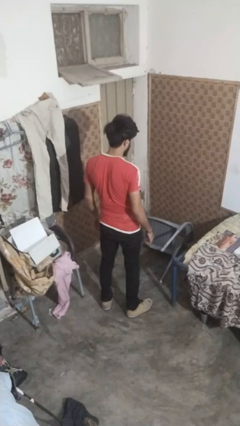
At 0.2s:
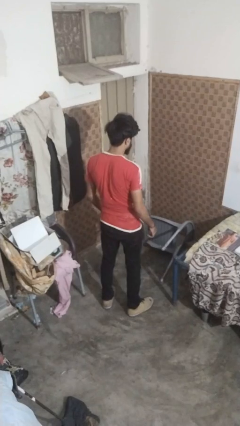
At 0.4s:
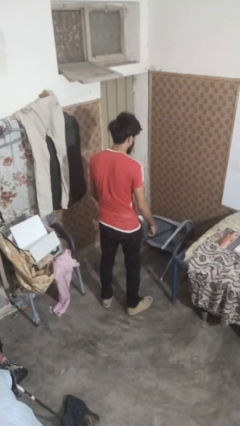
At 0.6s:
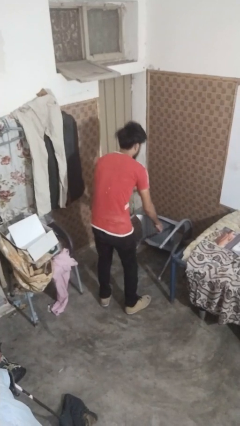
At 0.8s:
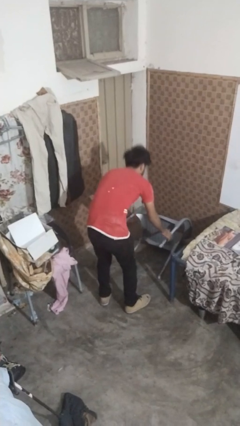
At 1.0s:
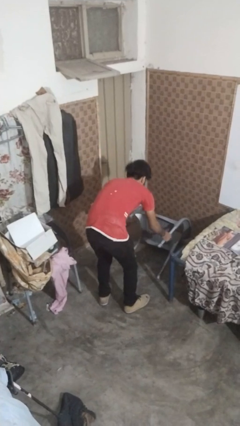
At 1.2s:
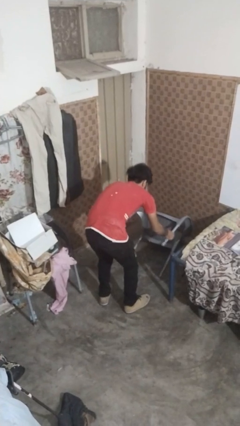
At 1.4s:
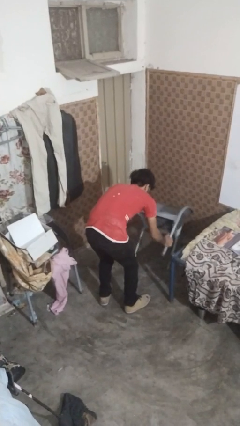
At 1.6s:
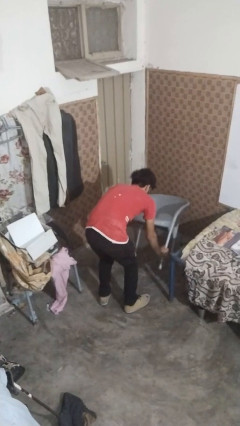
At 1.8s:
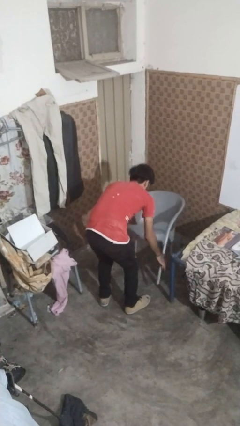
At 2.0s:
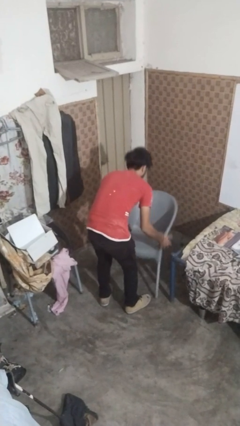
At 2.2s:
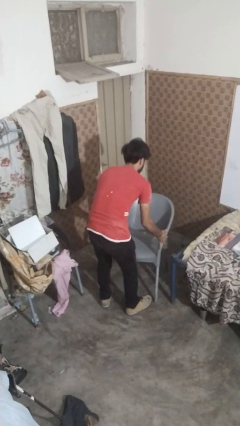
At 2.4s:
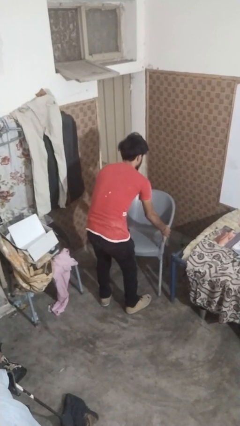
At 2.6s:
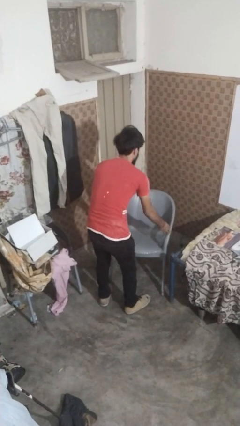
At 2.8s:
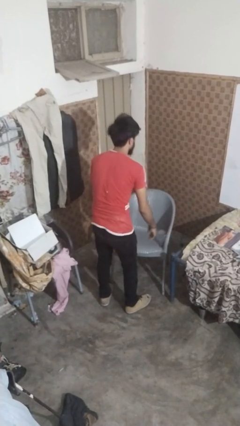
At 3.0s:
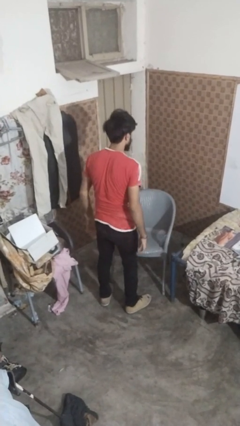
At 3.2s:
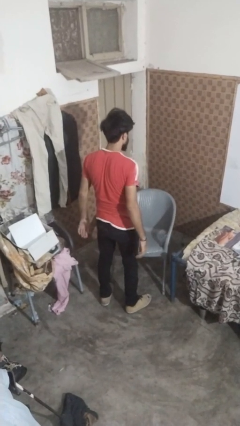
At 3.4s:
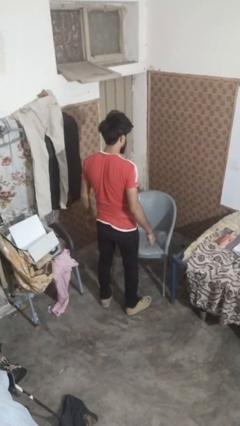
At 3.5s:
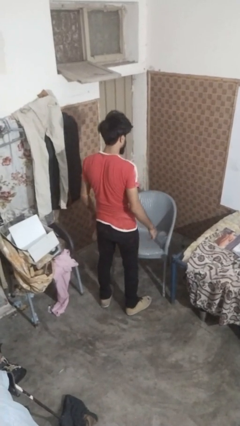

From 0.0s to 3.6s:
person sets upright furniture

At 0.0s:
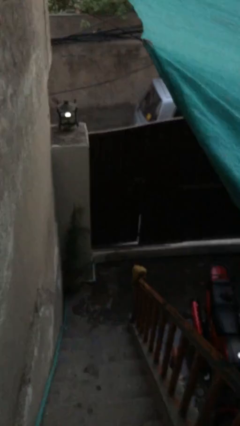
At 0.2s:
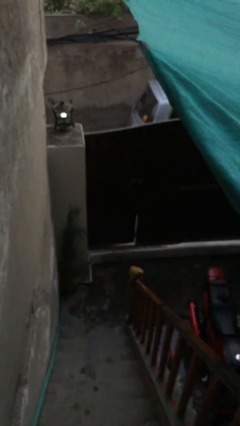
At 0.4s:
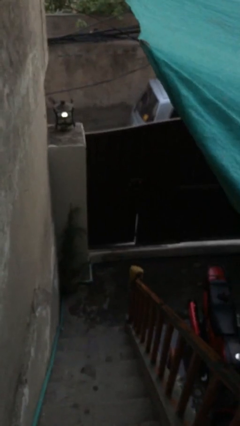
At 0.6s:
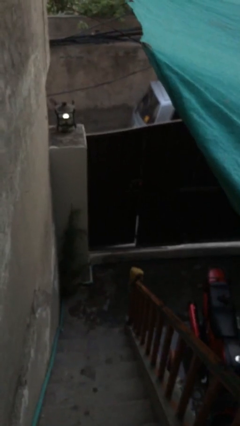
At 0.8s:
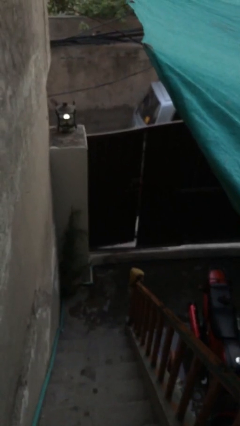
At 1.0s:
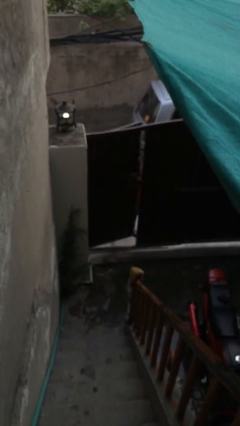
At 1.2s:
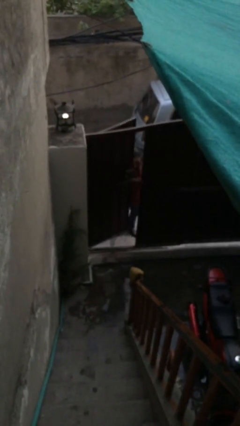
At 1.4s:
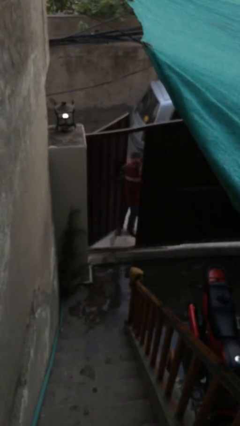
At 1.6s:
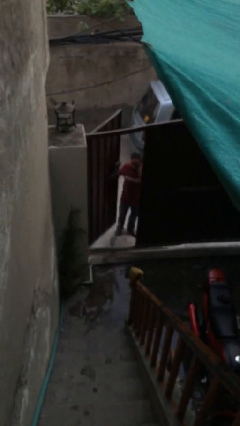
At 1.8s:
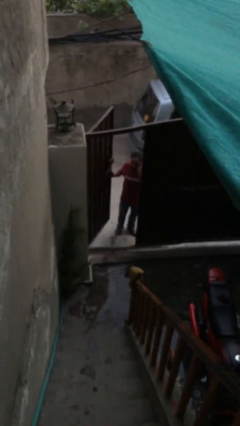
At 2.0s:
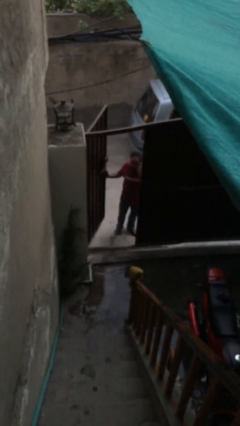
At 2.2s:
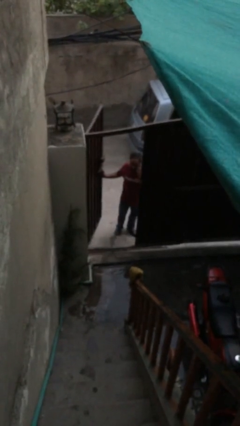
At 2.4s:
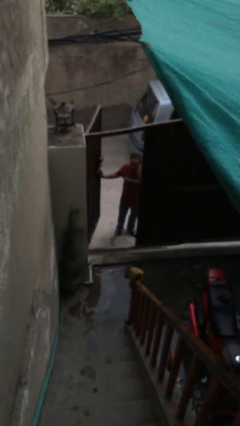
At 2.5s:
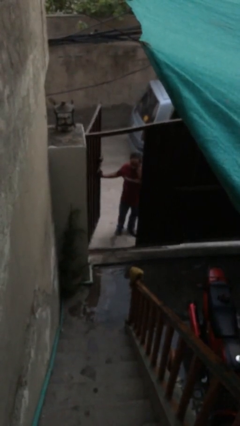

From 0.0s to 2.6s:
person opens facility door

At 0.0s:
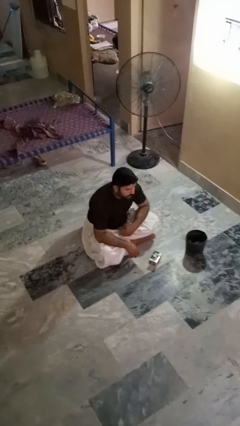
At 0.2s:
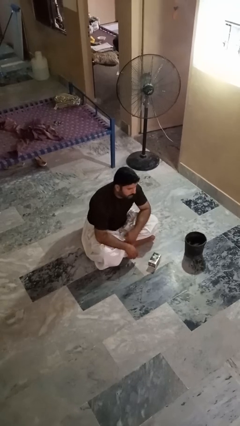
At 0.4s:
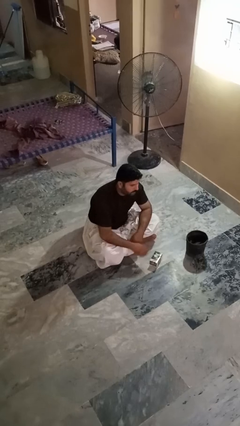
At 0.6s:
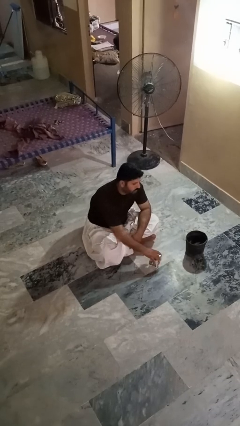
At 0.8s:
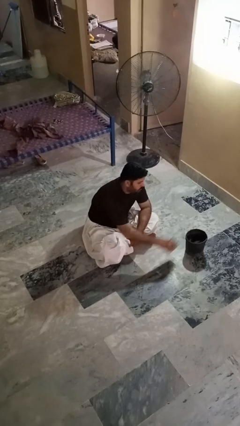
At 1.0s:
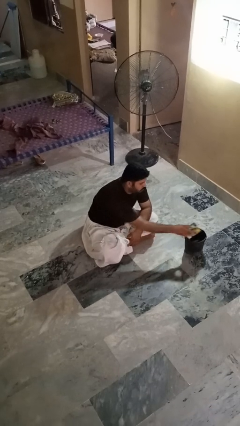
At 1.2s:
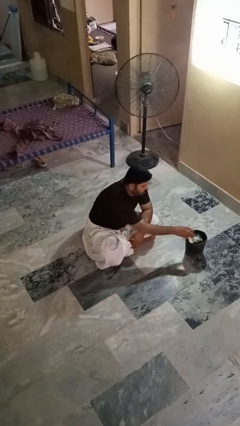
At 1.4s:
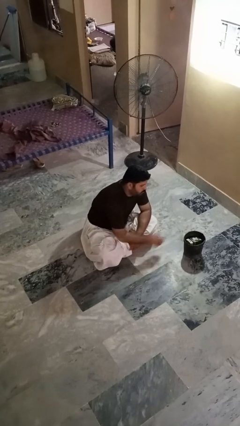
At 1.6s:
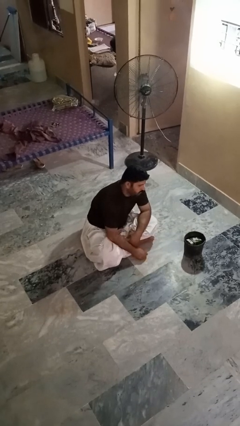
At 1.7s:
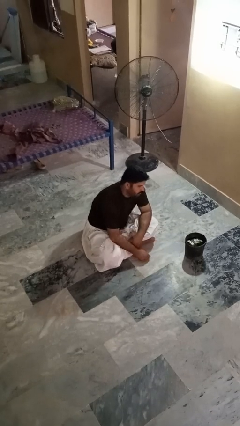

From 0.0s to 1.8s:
person puts object into basket

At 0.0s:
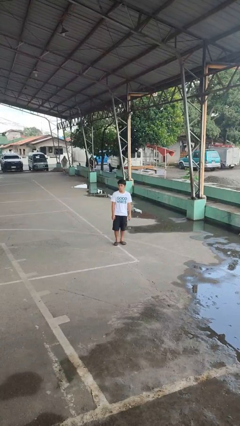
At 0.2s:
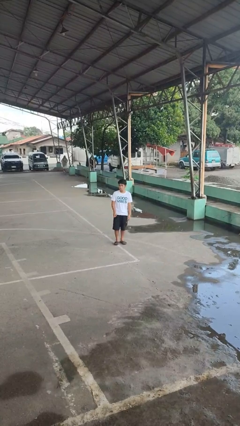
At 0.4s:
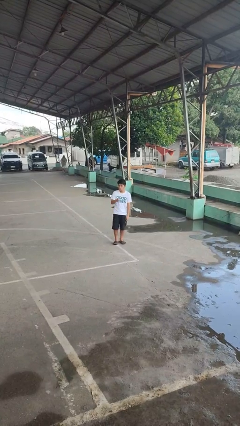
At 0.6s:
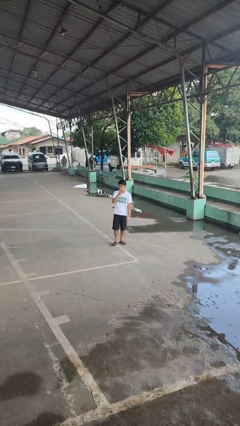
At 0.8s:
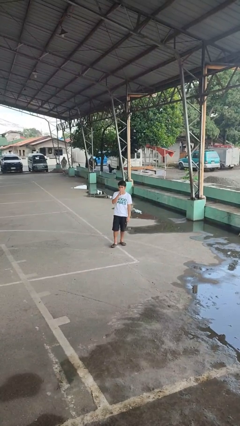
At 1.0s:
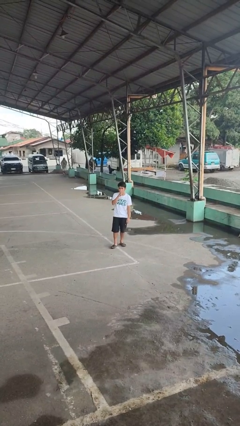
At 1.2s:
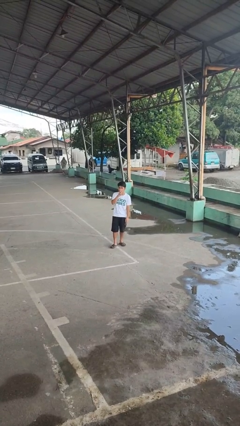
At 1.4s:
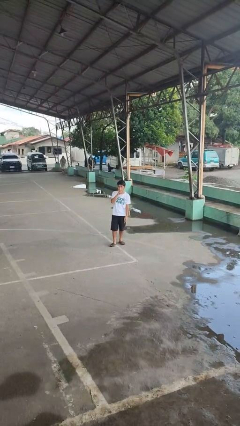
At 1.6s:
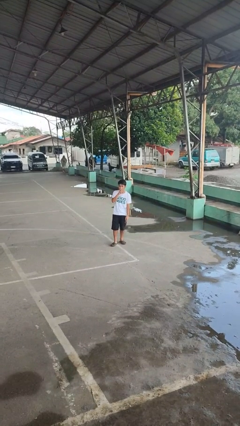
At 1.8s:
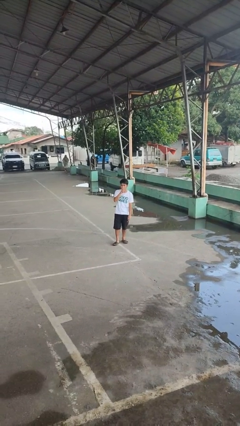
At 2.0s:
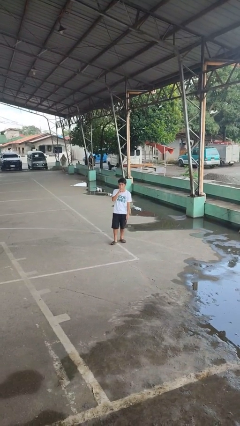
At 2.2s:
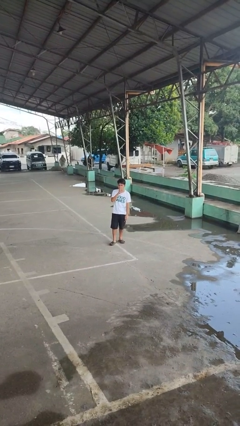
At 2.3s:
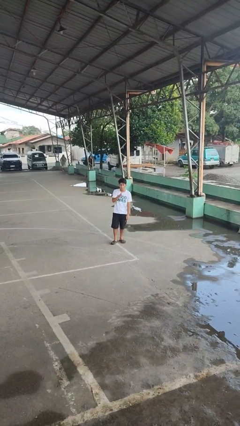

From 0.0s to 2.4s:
person gestures be quiet

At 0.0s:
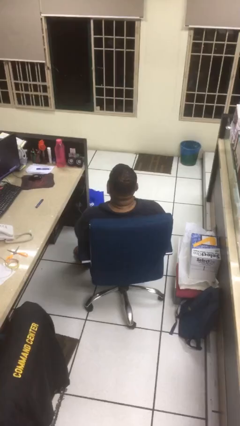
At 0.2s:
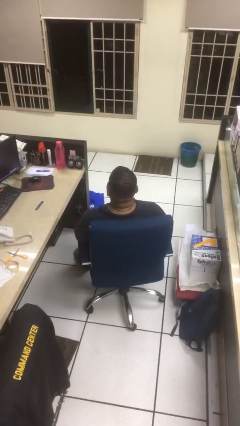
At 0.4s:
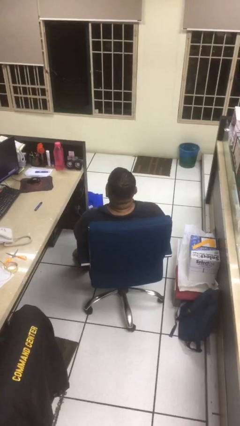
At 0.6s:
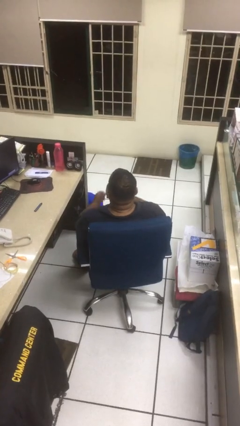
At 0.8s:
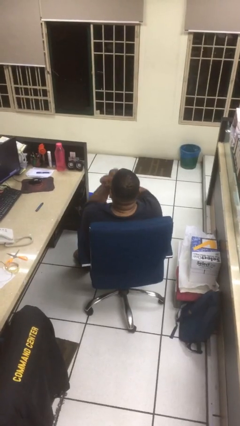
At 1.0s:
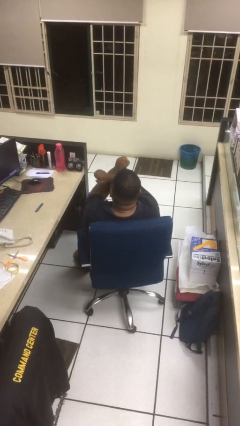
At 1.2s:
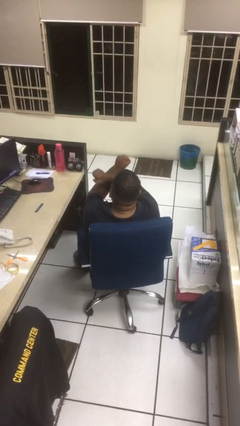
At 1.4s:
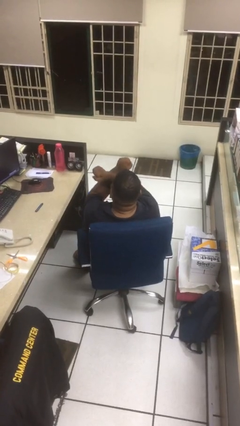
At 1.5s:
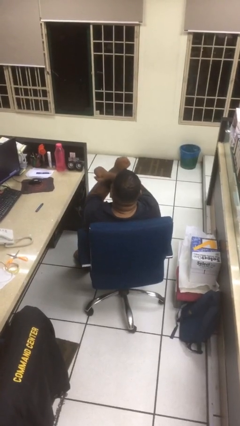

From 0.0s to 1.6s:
person gestures arms x

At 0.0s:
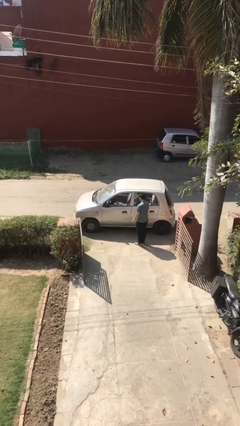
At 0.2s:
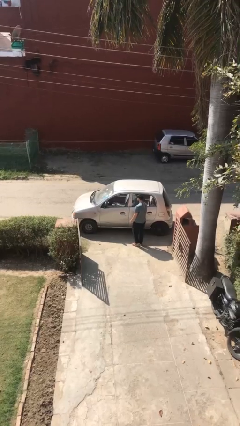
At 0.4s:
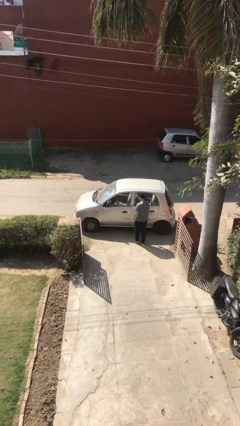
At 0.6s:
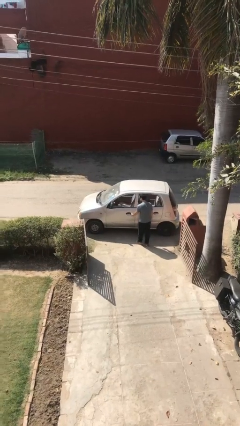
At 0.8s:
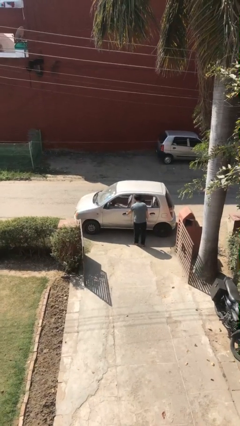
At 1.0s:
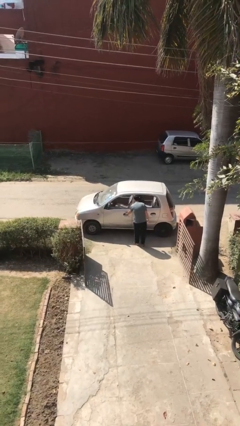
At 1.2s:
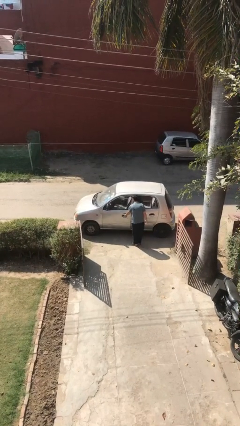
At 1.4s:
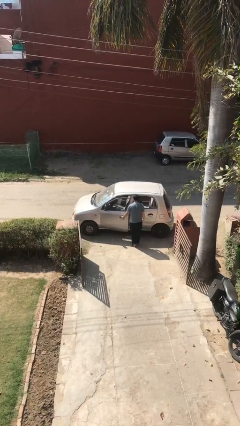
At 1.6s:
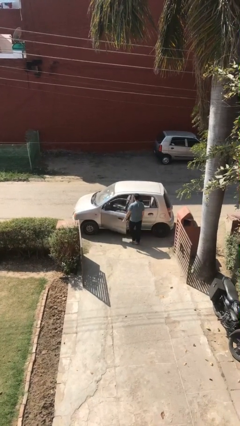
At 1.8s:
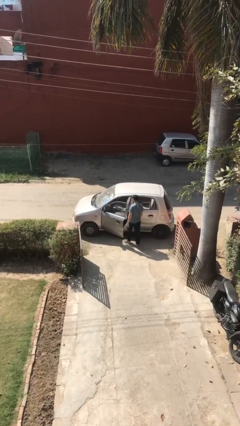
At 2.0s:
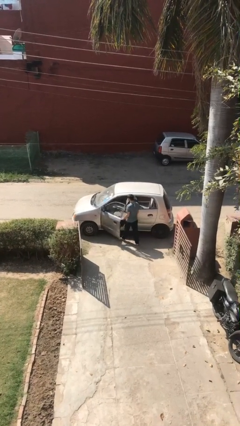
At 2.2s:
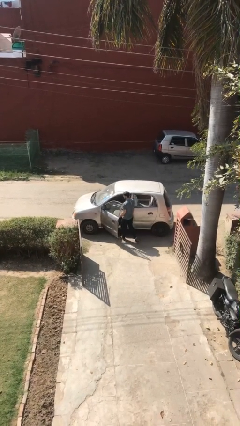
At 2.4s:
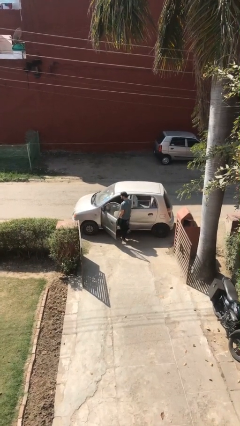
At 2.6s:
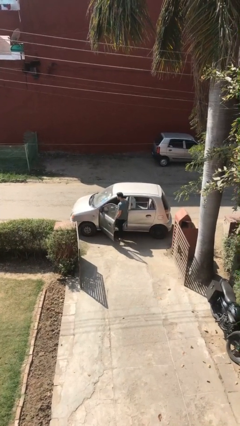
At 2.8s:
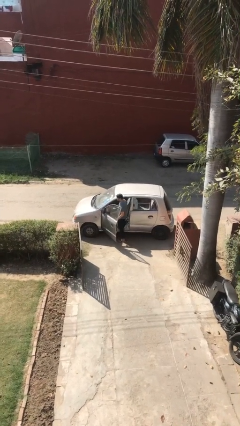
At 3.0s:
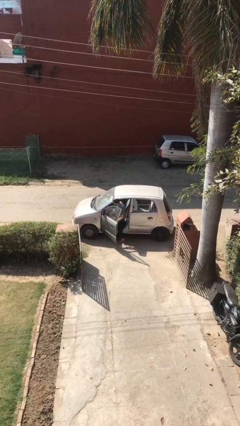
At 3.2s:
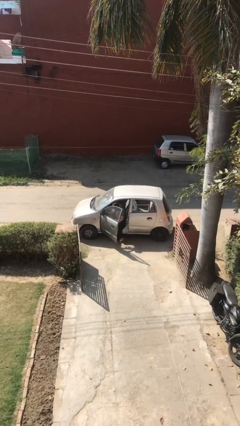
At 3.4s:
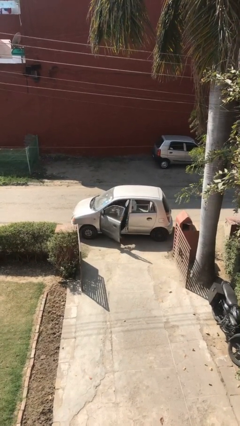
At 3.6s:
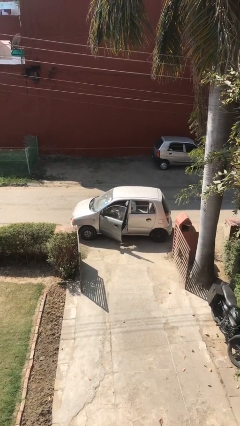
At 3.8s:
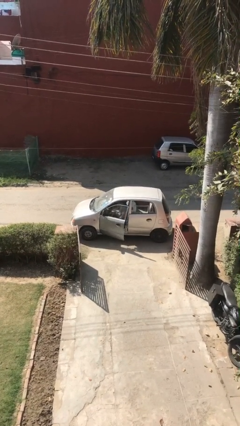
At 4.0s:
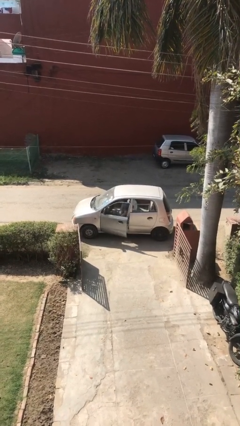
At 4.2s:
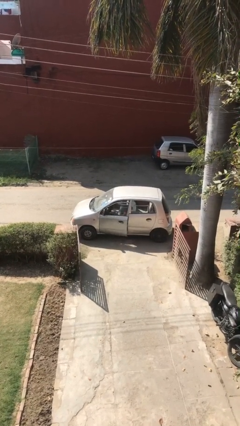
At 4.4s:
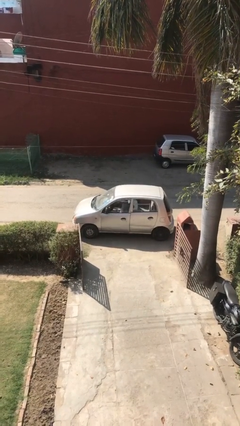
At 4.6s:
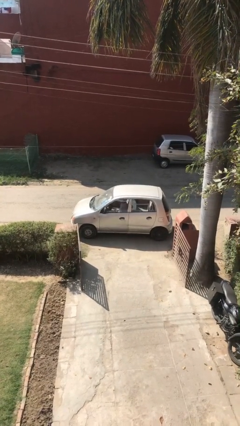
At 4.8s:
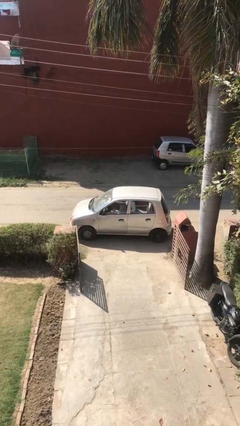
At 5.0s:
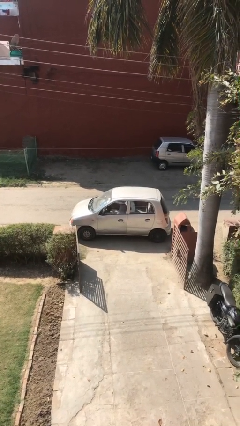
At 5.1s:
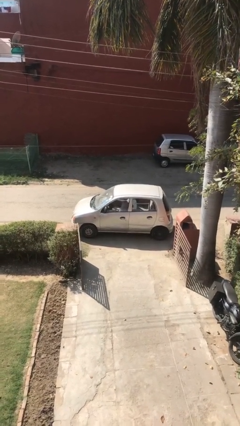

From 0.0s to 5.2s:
car picks up person

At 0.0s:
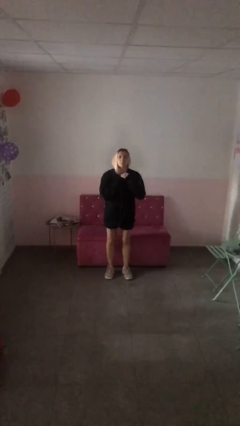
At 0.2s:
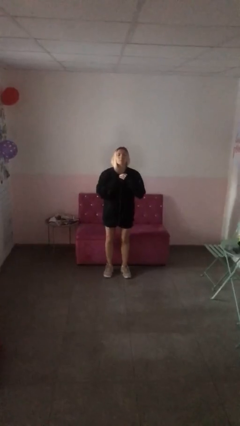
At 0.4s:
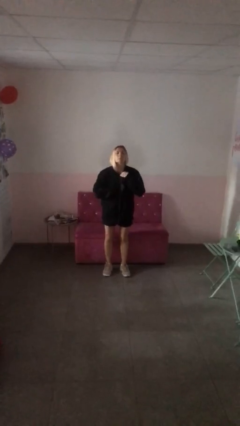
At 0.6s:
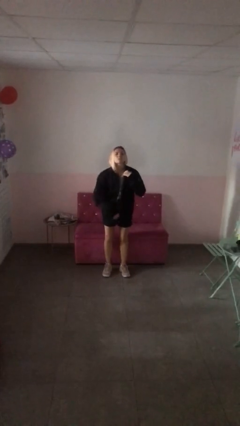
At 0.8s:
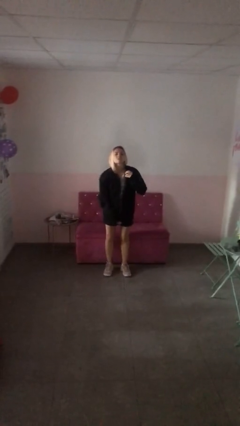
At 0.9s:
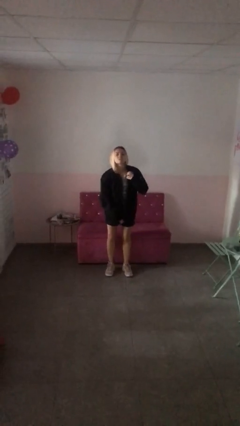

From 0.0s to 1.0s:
person unzips jacket
